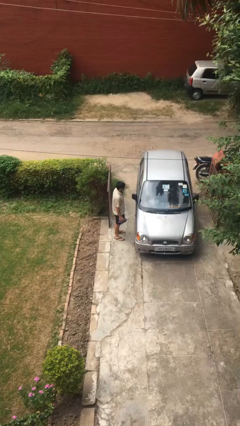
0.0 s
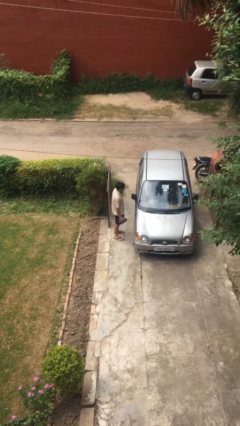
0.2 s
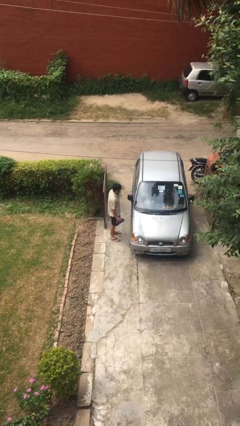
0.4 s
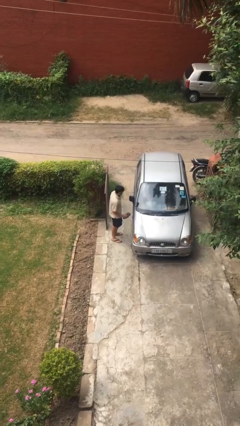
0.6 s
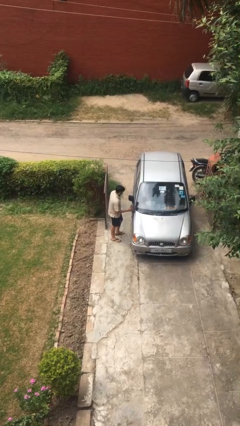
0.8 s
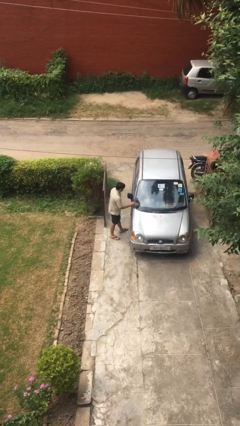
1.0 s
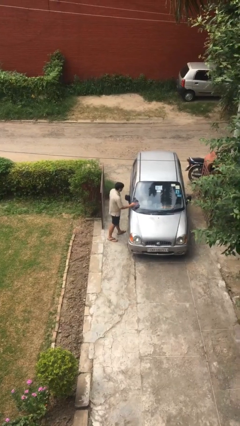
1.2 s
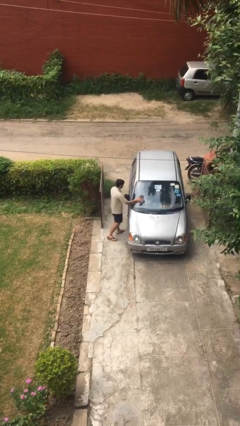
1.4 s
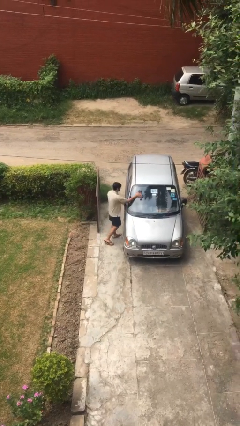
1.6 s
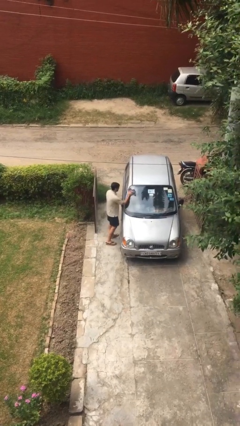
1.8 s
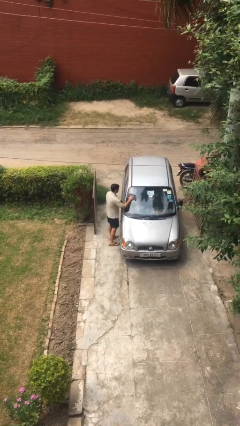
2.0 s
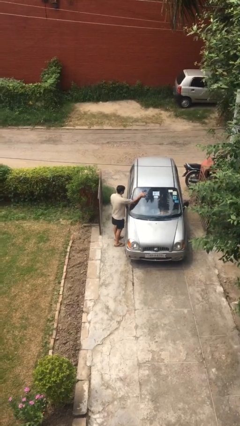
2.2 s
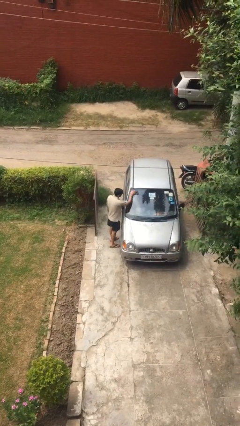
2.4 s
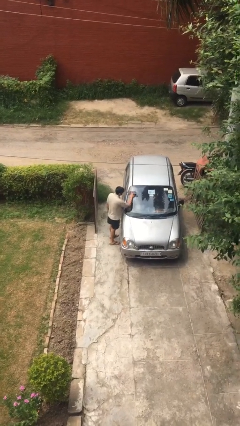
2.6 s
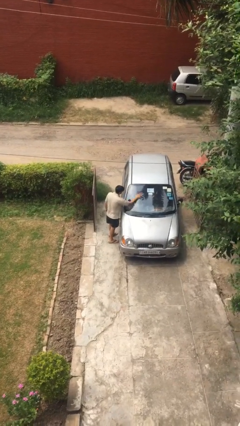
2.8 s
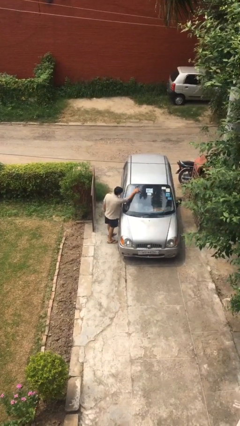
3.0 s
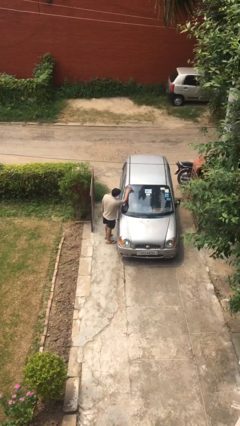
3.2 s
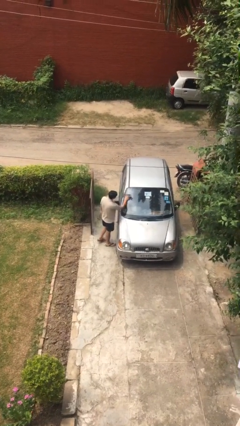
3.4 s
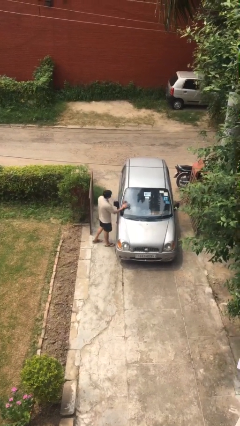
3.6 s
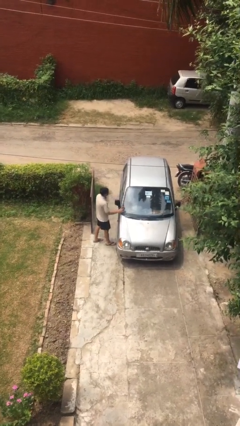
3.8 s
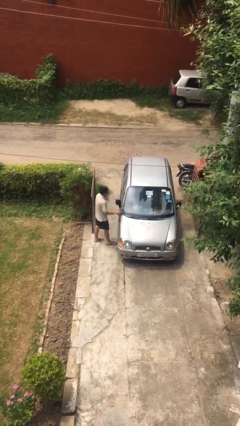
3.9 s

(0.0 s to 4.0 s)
person polishes car with rag

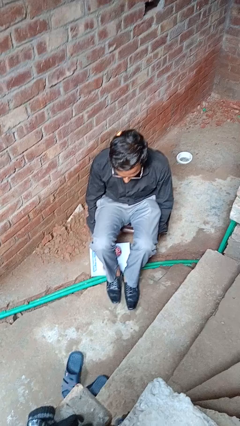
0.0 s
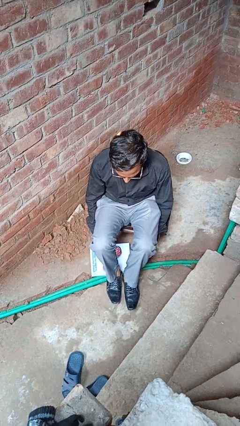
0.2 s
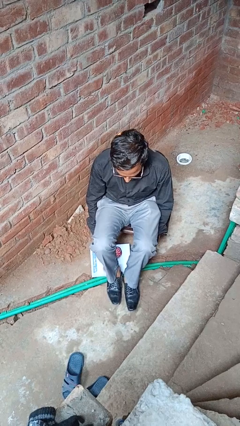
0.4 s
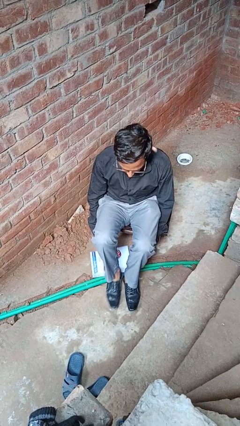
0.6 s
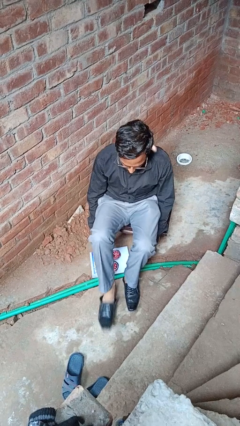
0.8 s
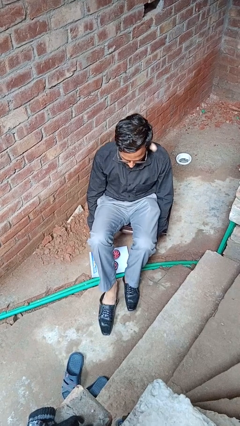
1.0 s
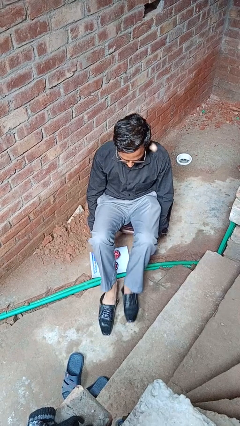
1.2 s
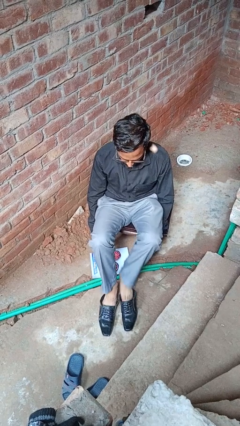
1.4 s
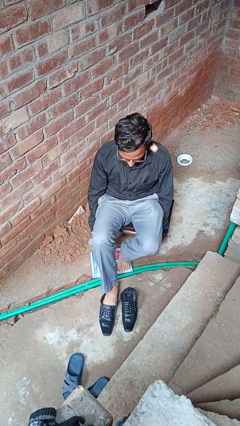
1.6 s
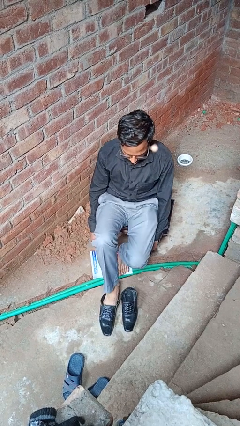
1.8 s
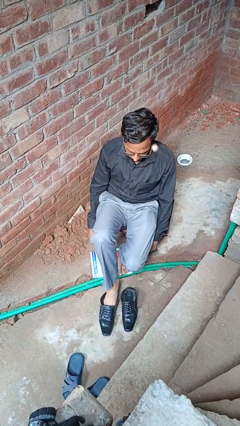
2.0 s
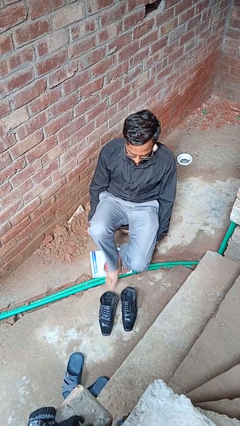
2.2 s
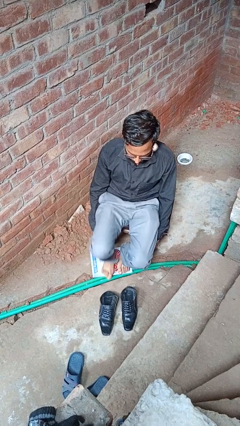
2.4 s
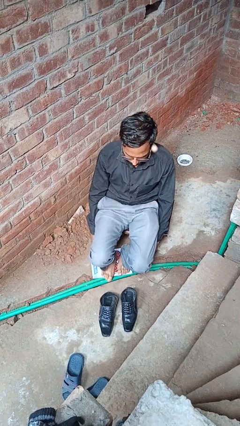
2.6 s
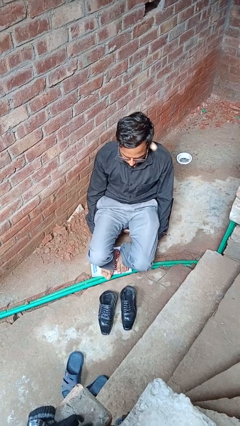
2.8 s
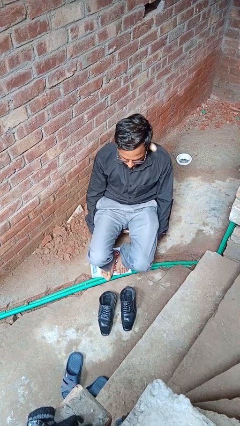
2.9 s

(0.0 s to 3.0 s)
person takes off shoes

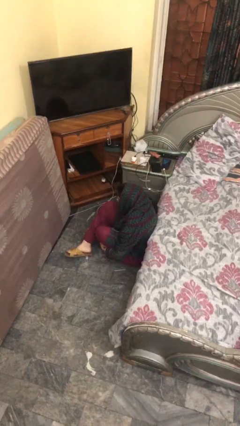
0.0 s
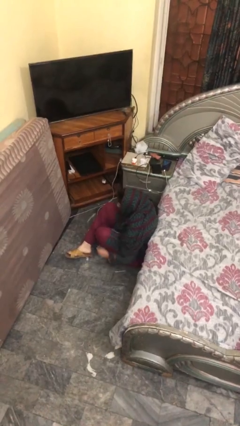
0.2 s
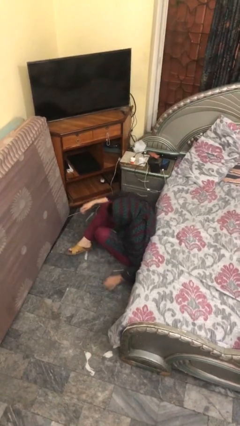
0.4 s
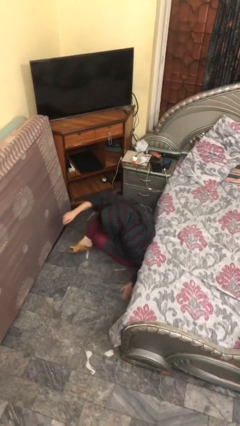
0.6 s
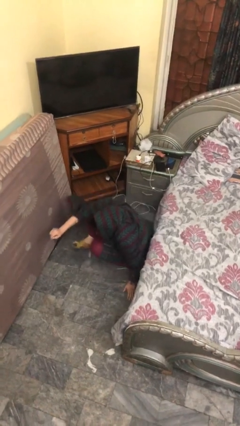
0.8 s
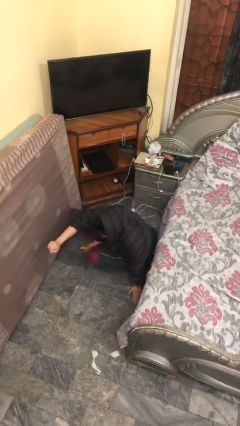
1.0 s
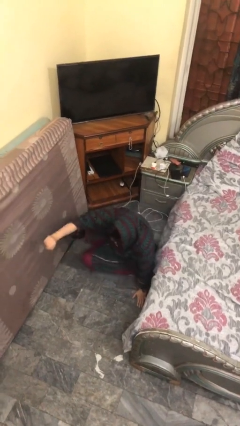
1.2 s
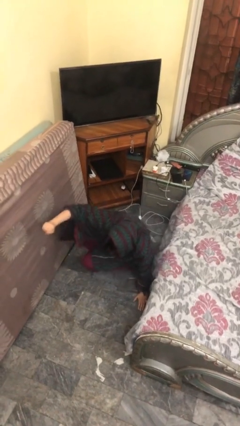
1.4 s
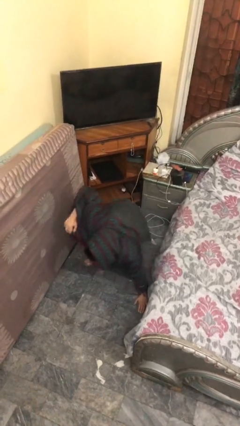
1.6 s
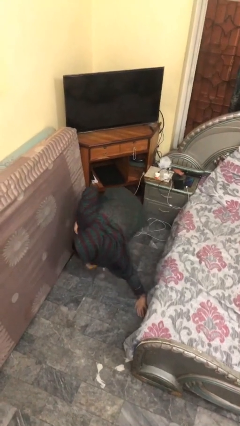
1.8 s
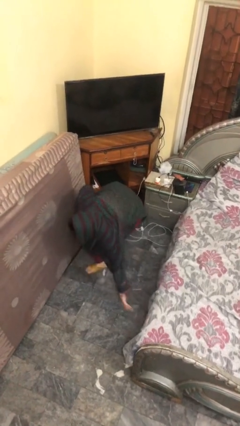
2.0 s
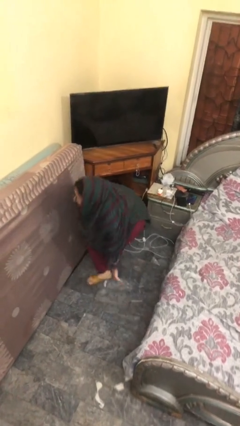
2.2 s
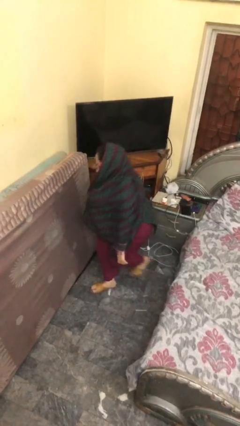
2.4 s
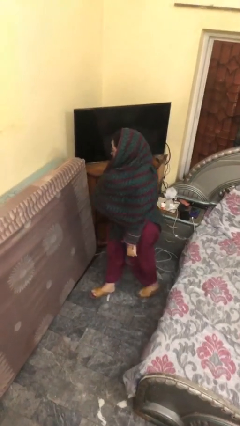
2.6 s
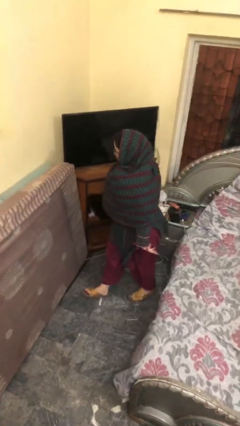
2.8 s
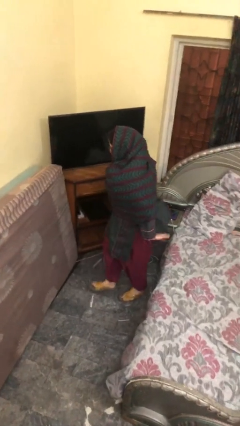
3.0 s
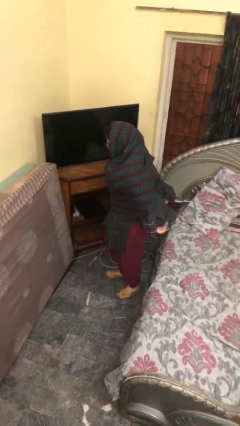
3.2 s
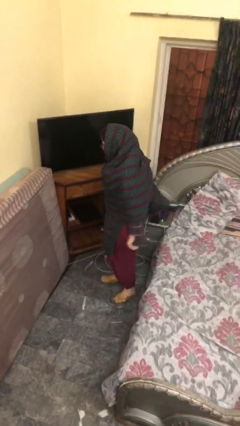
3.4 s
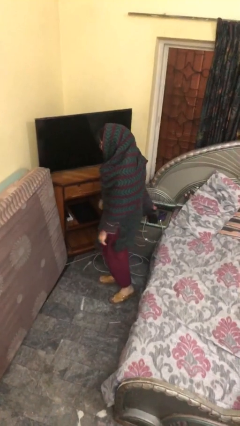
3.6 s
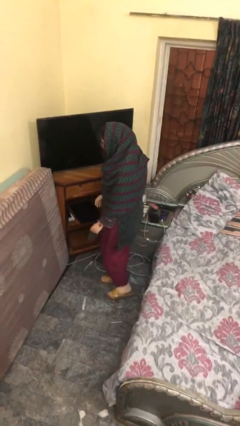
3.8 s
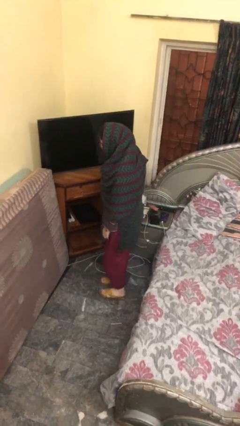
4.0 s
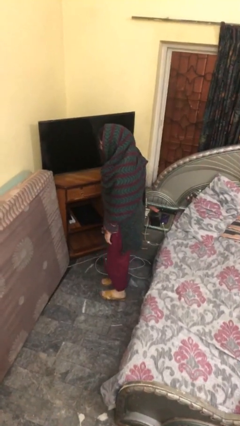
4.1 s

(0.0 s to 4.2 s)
person stands up from floor

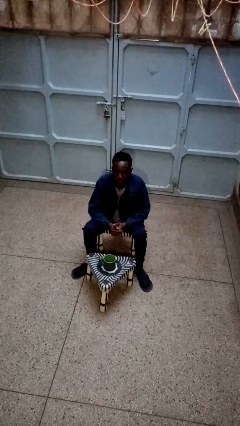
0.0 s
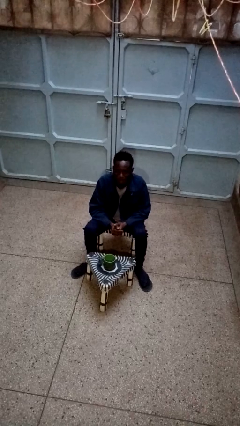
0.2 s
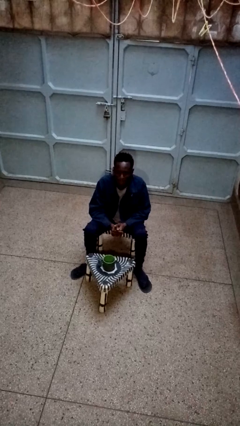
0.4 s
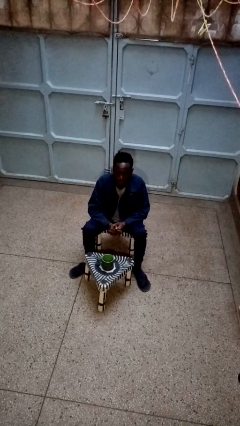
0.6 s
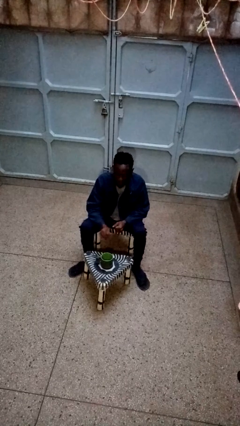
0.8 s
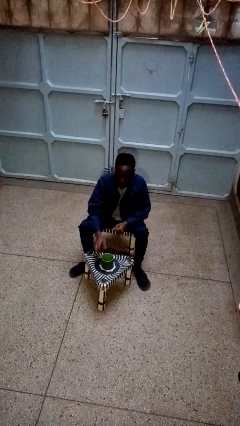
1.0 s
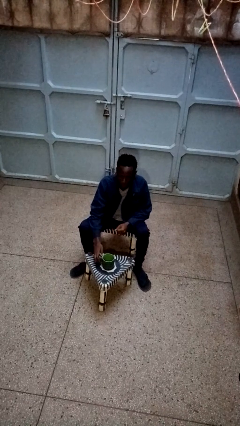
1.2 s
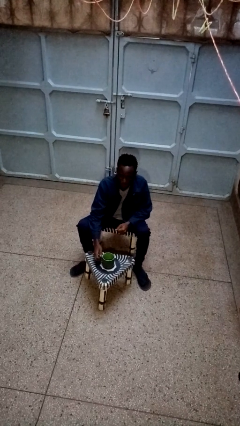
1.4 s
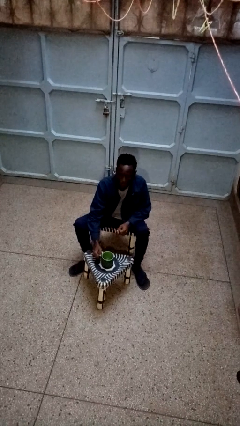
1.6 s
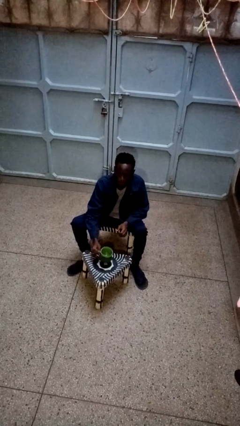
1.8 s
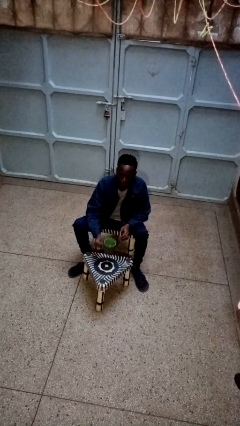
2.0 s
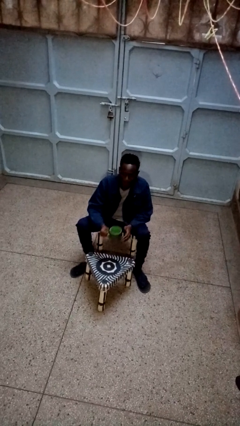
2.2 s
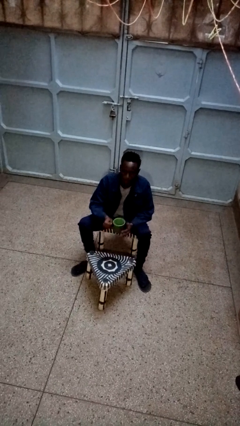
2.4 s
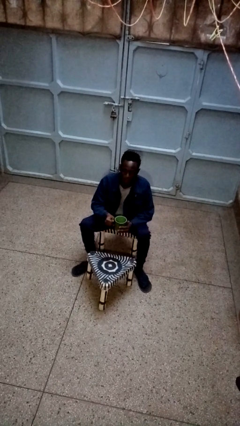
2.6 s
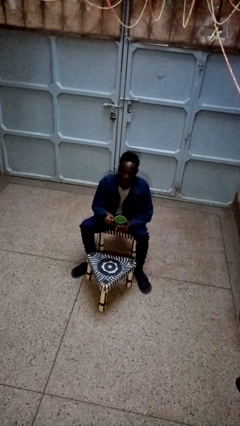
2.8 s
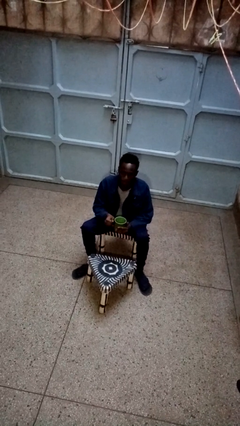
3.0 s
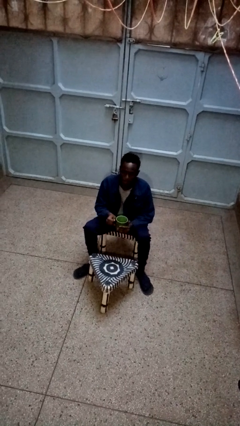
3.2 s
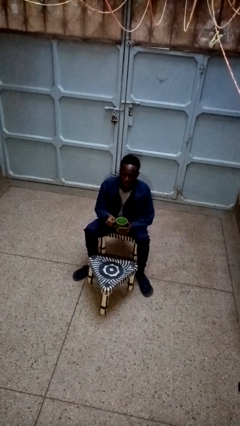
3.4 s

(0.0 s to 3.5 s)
person picks up object from table

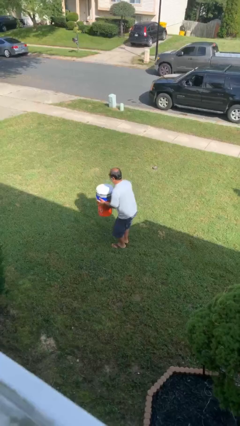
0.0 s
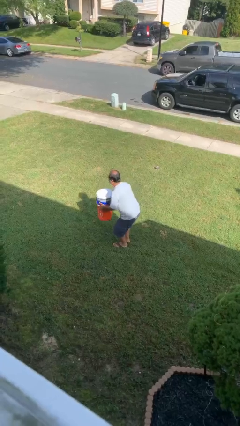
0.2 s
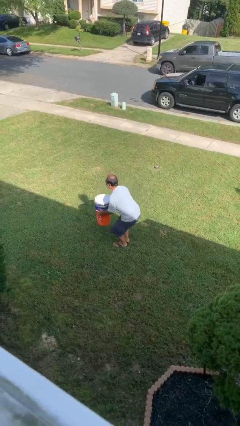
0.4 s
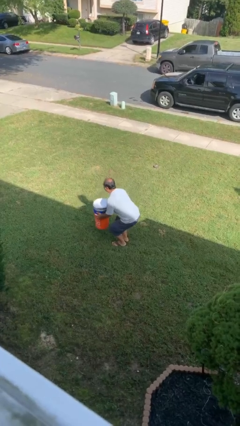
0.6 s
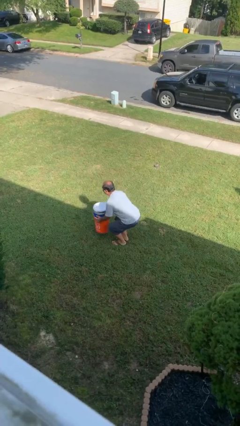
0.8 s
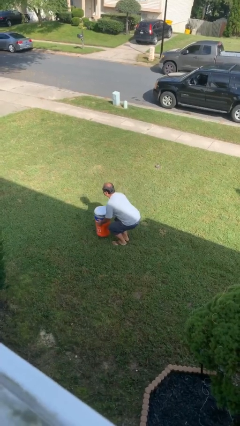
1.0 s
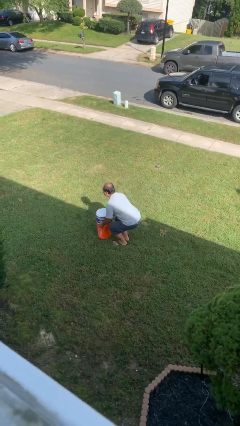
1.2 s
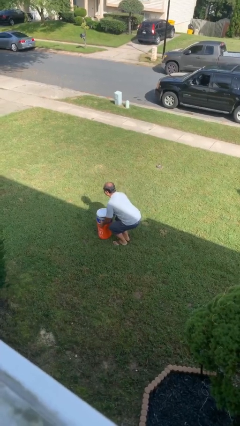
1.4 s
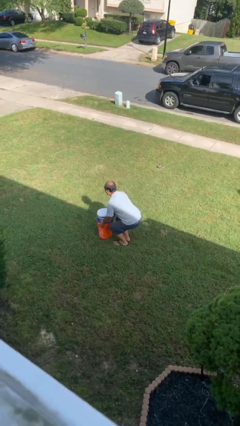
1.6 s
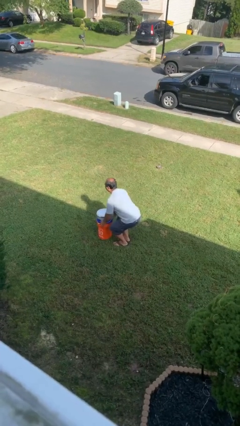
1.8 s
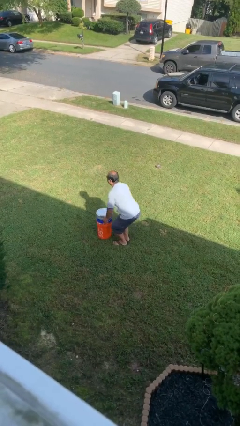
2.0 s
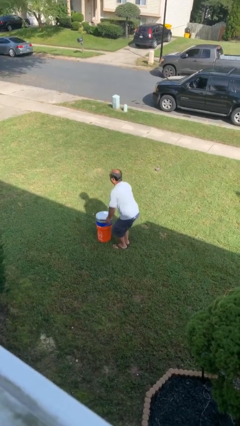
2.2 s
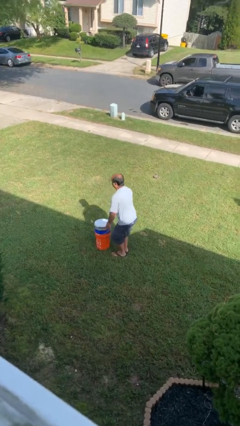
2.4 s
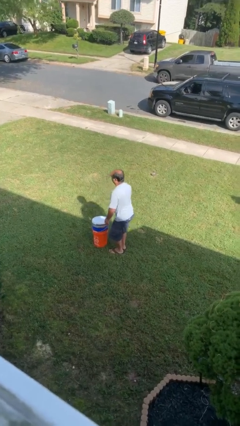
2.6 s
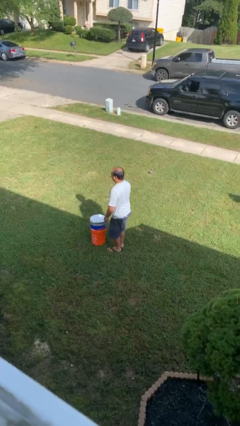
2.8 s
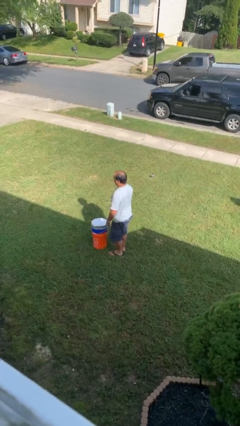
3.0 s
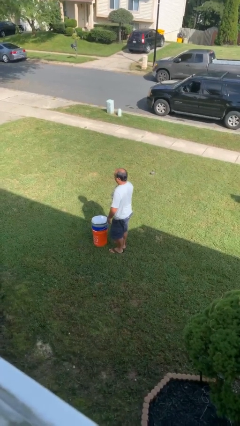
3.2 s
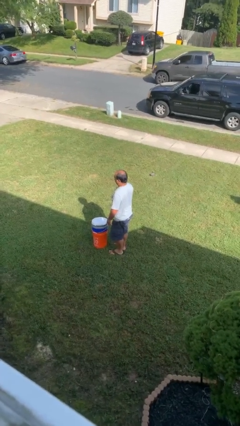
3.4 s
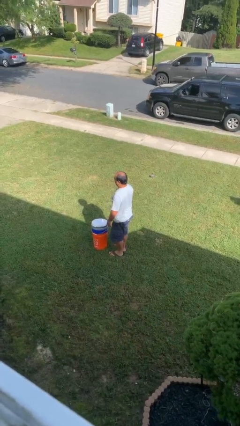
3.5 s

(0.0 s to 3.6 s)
person puts down object on floor
